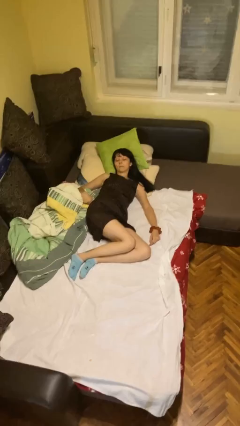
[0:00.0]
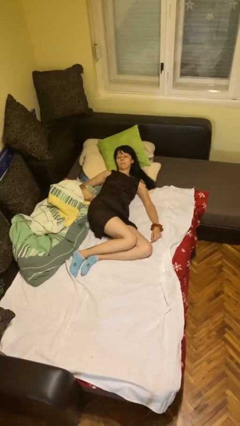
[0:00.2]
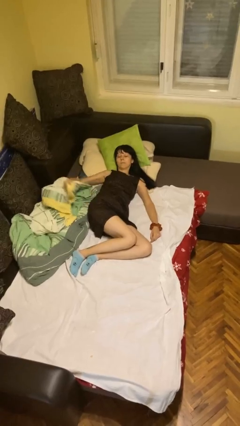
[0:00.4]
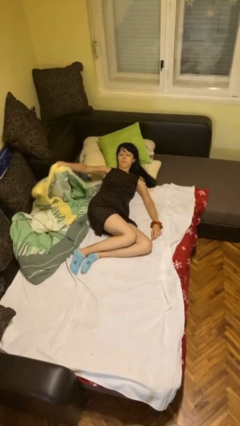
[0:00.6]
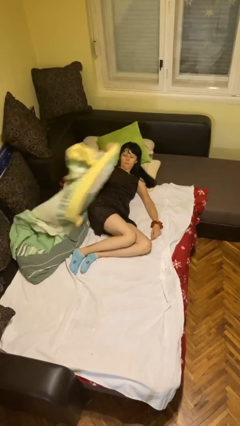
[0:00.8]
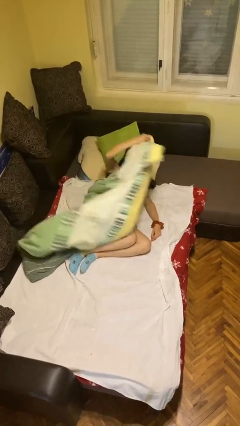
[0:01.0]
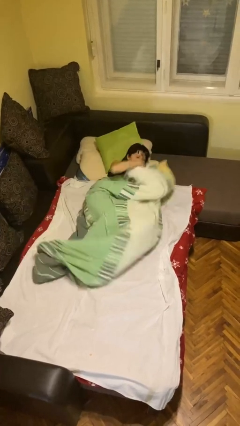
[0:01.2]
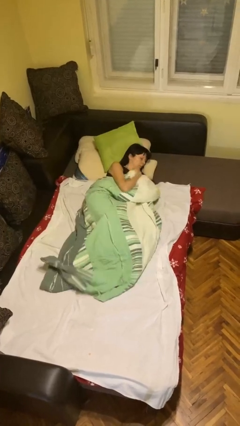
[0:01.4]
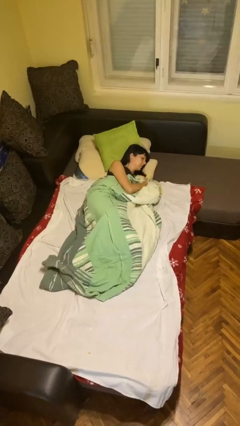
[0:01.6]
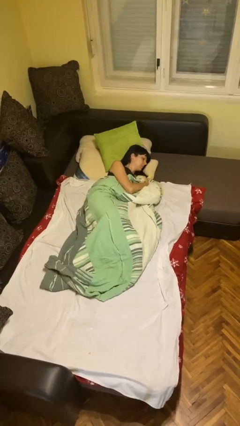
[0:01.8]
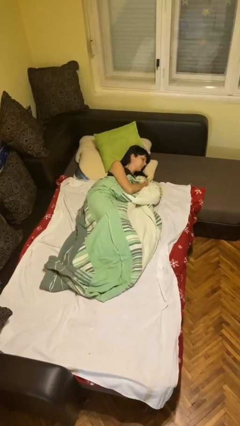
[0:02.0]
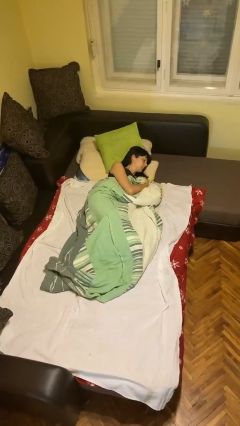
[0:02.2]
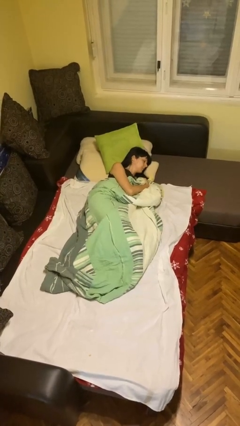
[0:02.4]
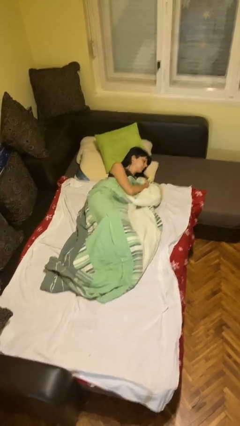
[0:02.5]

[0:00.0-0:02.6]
person covers with bedsheets

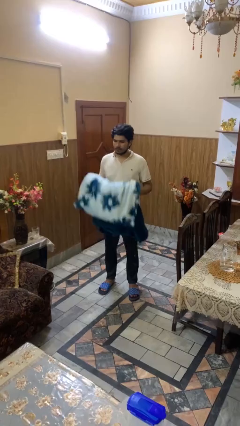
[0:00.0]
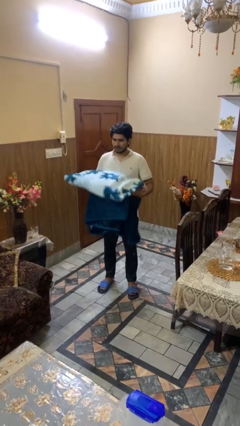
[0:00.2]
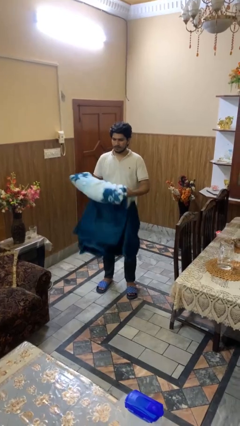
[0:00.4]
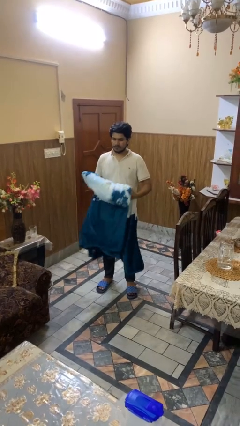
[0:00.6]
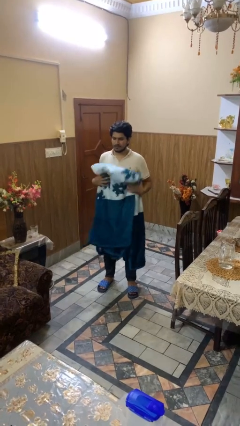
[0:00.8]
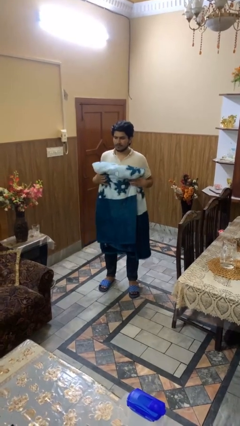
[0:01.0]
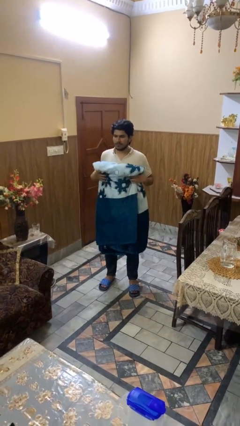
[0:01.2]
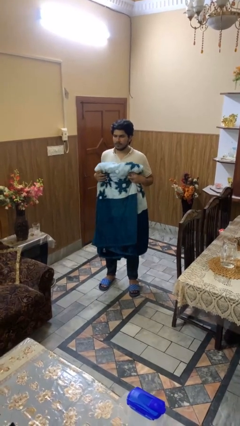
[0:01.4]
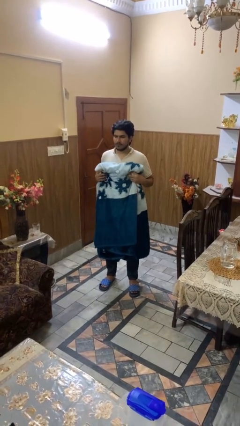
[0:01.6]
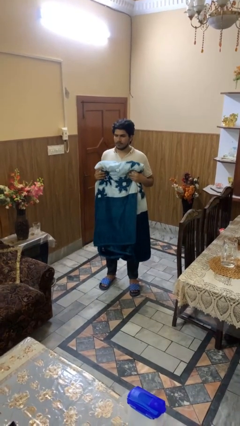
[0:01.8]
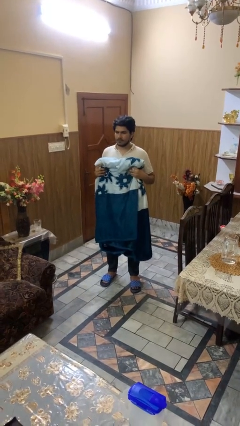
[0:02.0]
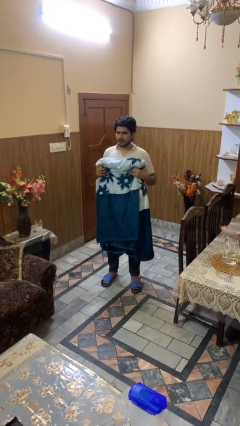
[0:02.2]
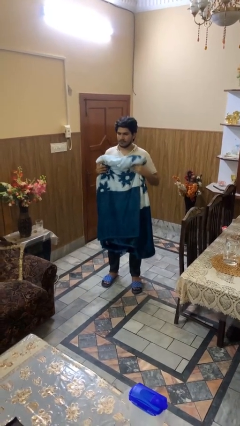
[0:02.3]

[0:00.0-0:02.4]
person unfolds blanket

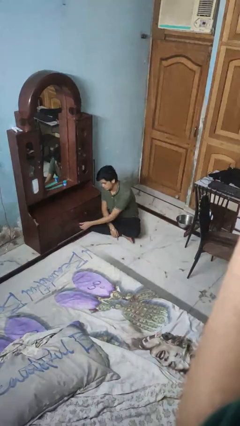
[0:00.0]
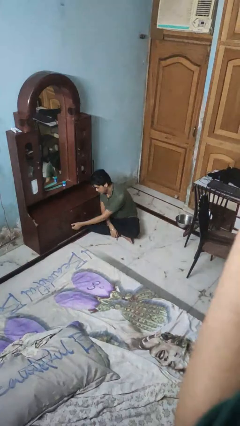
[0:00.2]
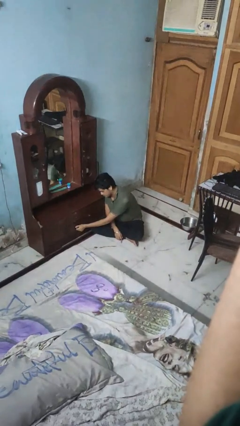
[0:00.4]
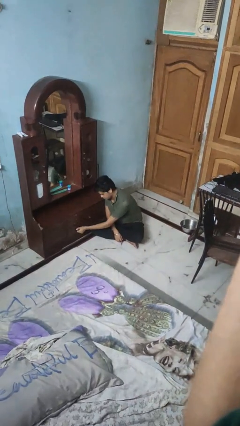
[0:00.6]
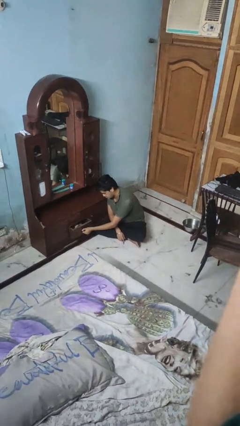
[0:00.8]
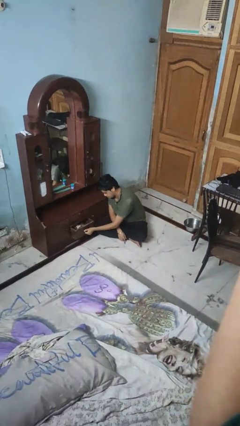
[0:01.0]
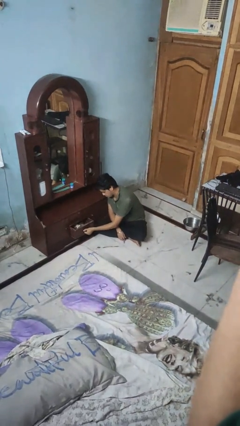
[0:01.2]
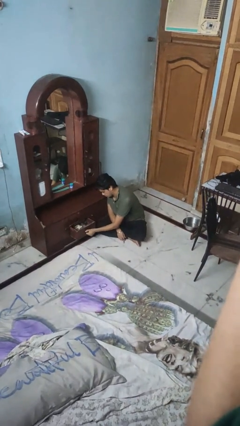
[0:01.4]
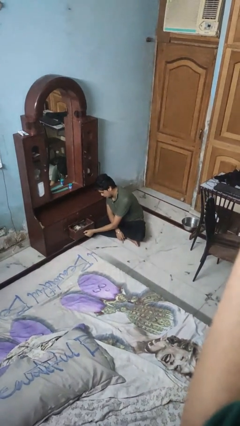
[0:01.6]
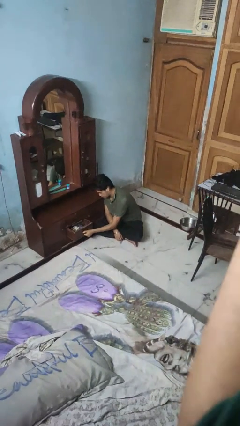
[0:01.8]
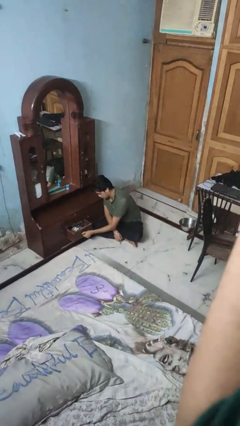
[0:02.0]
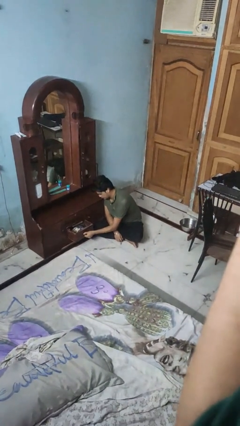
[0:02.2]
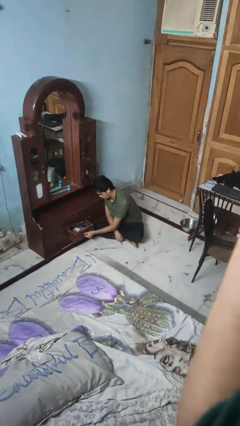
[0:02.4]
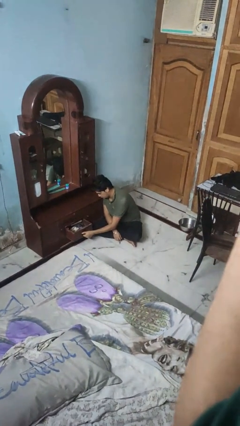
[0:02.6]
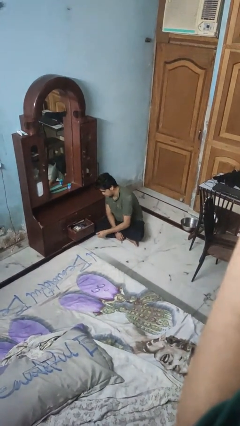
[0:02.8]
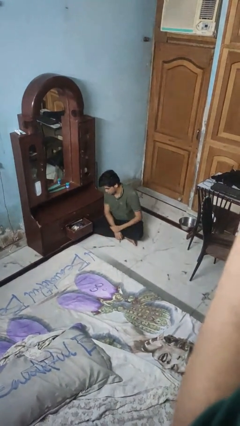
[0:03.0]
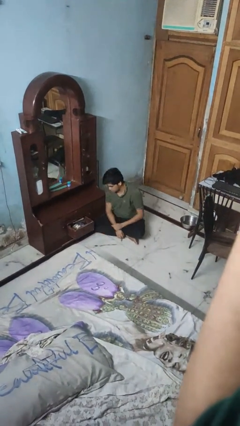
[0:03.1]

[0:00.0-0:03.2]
person opens dresser drawer

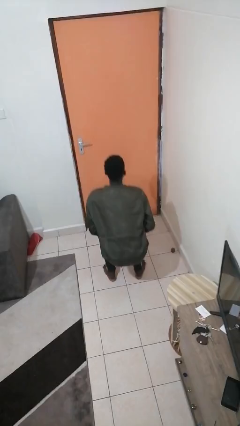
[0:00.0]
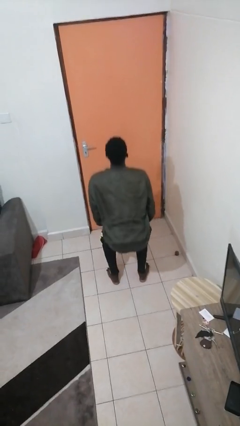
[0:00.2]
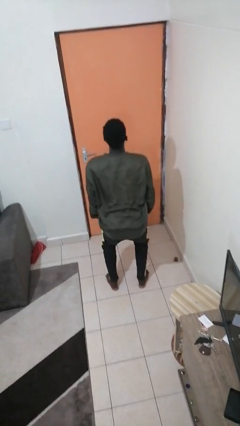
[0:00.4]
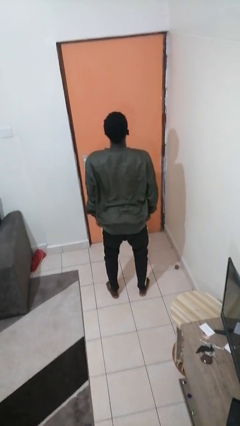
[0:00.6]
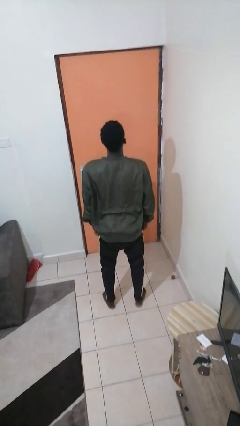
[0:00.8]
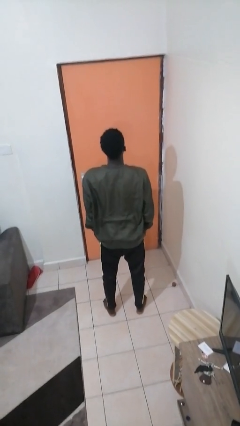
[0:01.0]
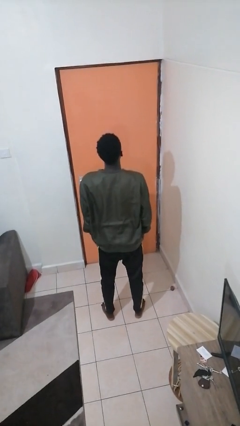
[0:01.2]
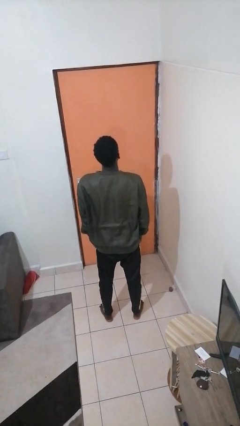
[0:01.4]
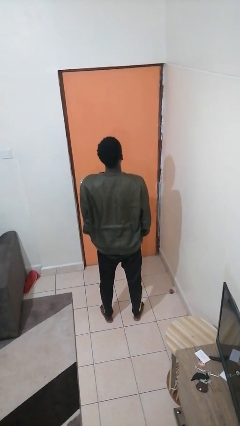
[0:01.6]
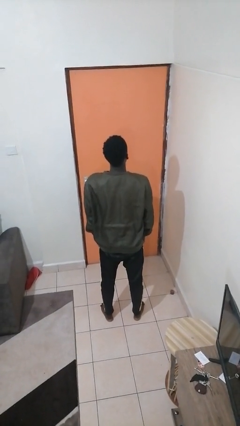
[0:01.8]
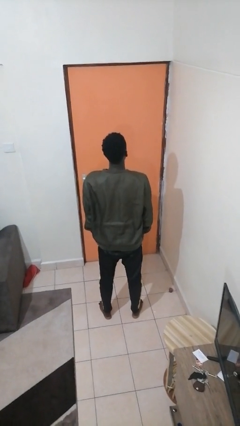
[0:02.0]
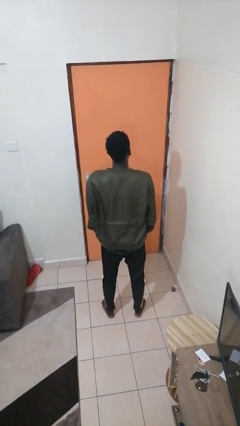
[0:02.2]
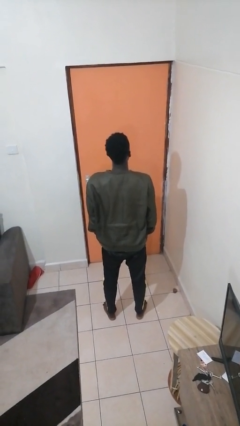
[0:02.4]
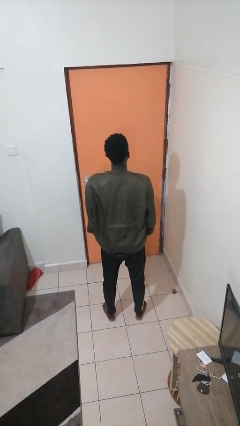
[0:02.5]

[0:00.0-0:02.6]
person stands up

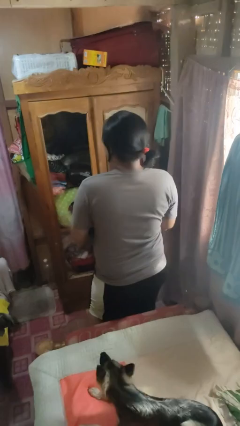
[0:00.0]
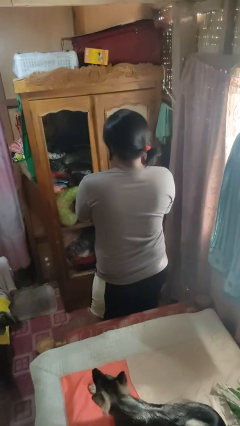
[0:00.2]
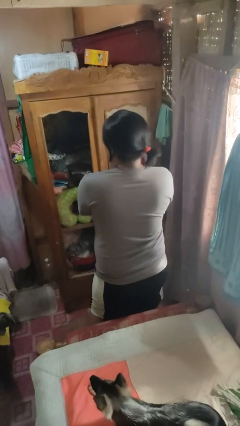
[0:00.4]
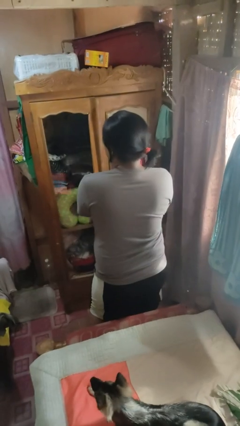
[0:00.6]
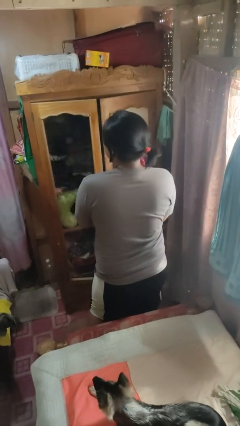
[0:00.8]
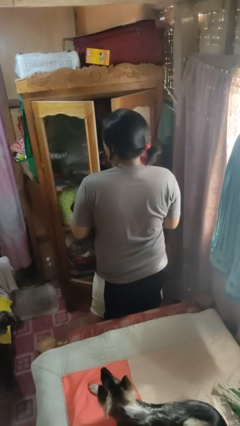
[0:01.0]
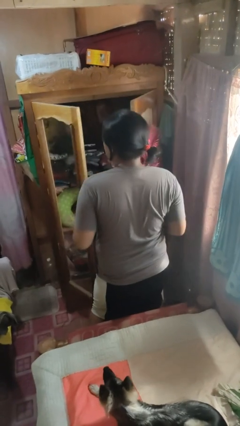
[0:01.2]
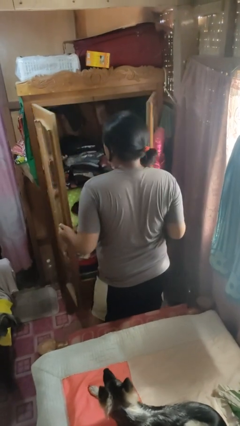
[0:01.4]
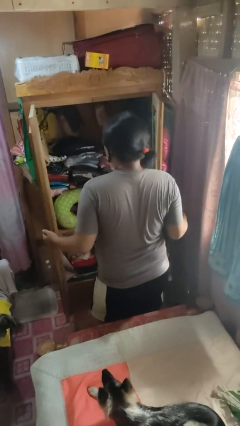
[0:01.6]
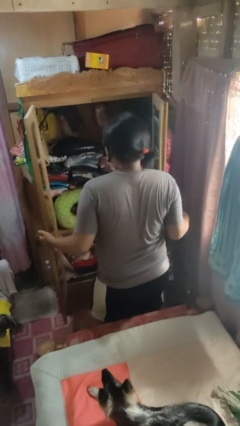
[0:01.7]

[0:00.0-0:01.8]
person opens closet door

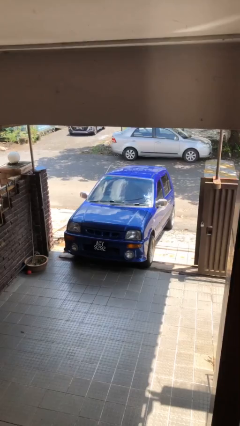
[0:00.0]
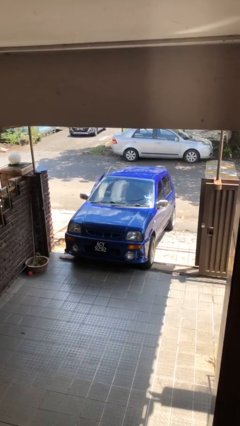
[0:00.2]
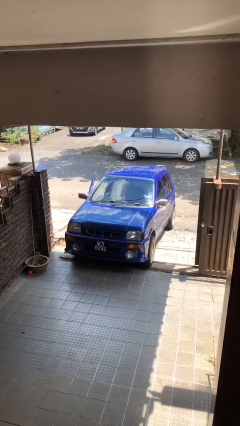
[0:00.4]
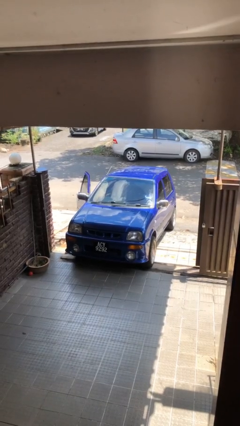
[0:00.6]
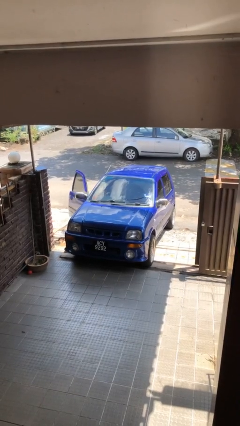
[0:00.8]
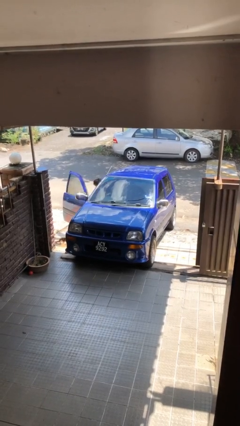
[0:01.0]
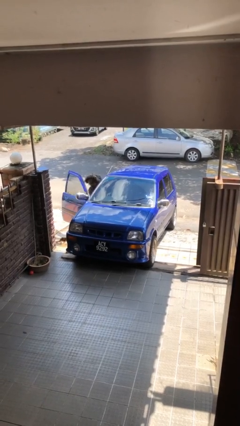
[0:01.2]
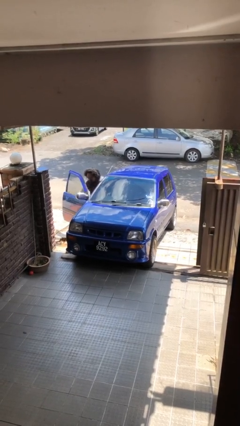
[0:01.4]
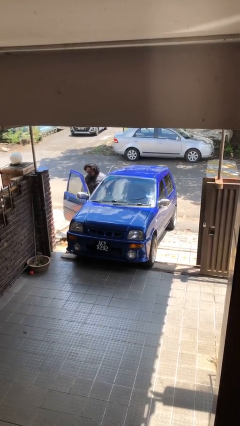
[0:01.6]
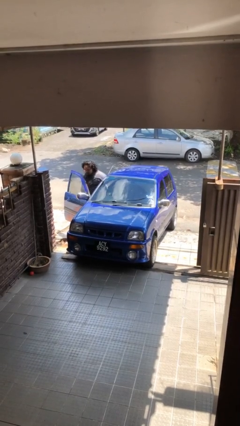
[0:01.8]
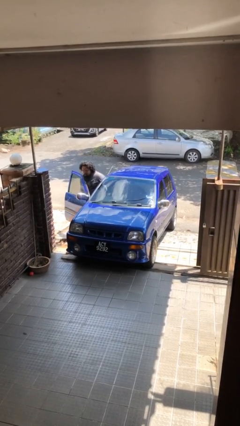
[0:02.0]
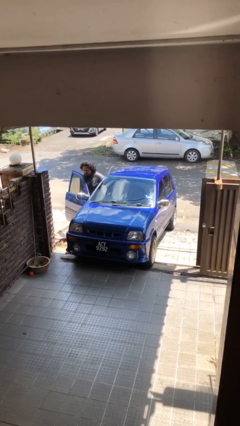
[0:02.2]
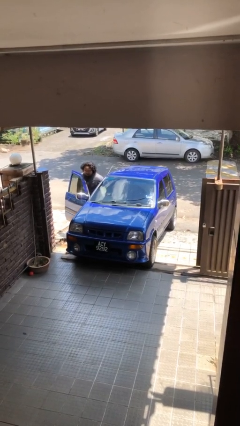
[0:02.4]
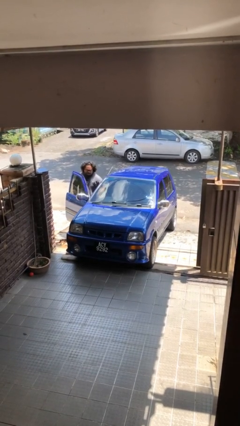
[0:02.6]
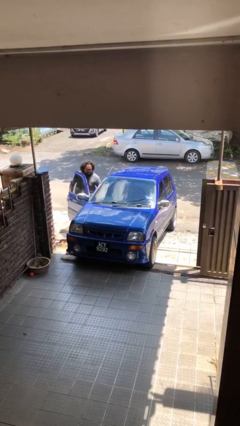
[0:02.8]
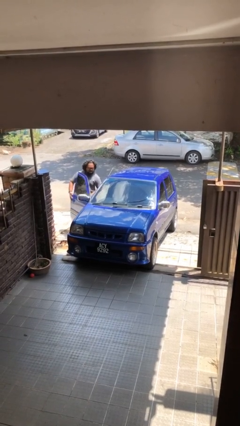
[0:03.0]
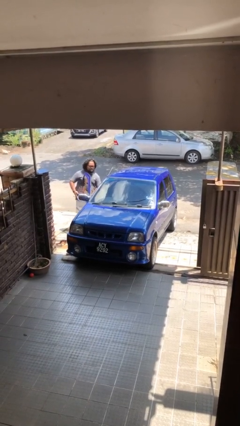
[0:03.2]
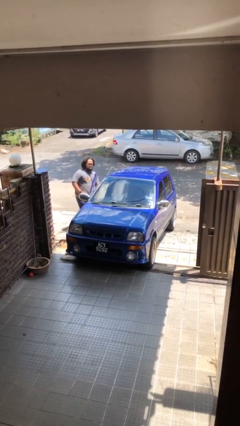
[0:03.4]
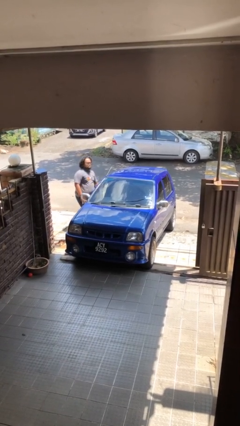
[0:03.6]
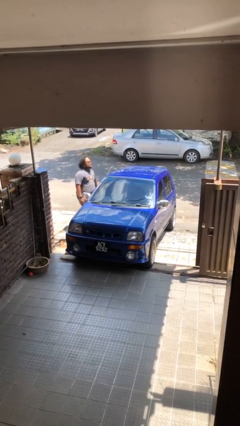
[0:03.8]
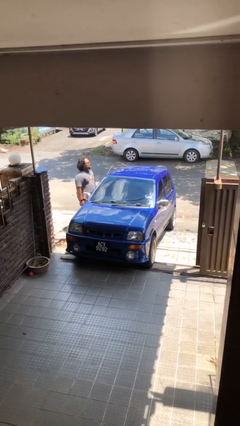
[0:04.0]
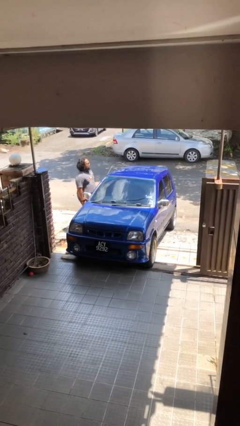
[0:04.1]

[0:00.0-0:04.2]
car drops off person

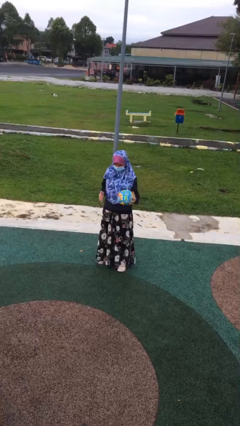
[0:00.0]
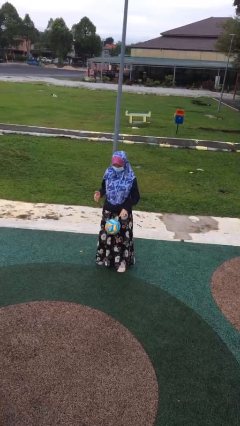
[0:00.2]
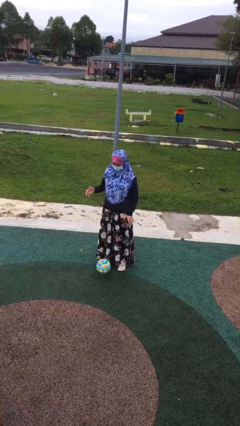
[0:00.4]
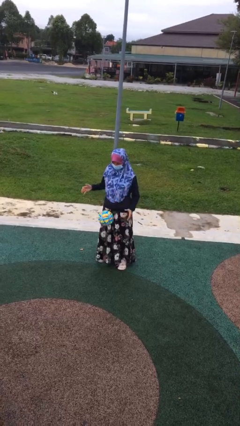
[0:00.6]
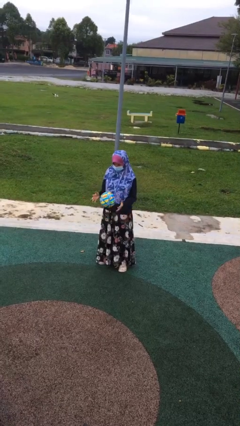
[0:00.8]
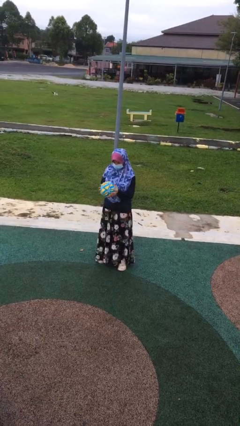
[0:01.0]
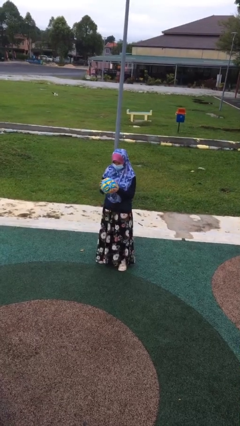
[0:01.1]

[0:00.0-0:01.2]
person bounces ball on floor
